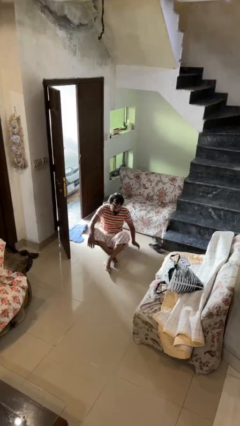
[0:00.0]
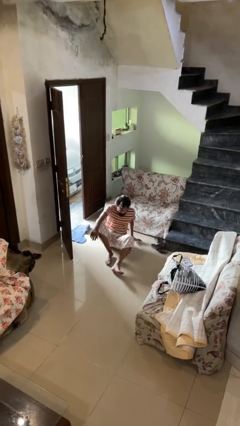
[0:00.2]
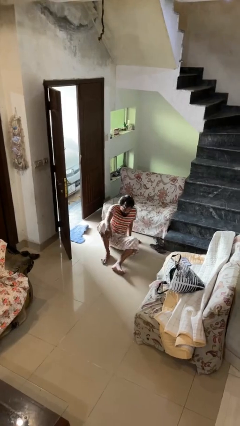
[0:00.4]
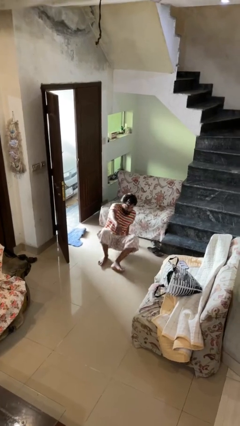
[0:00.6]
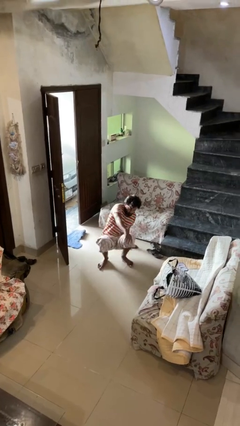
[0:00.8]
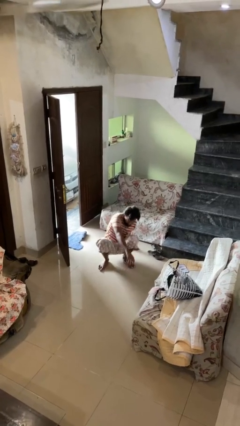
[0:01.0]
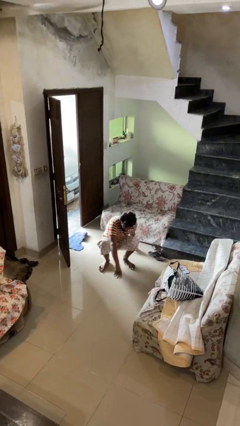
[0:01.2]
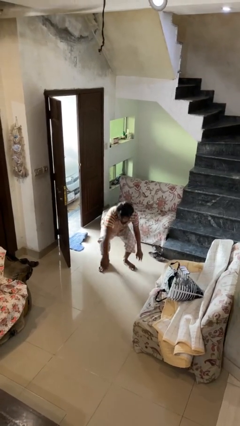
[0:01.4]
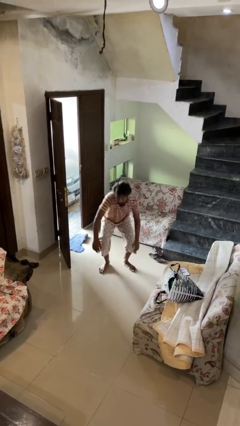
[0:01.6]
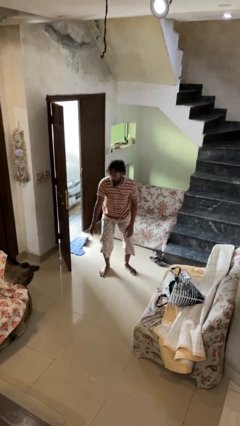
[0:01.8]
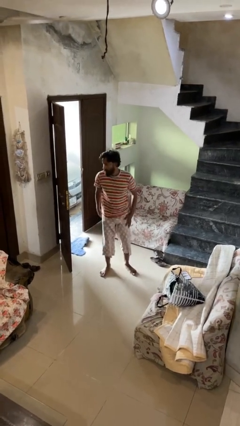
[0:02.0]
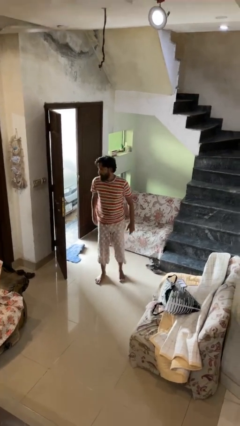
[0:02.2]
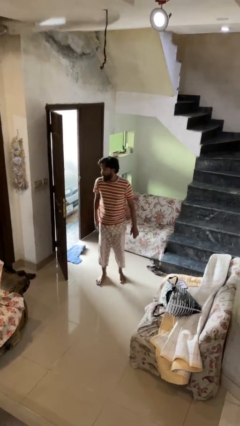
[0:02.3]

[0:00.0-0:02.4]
person stands up from floor

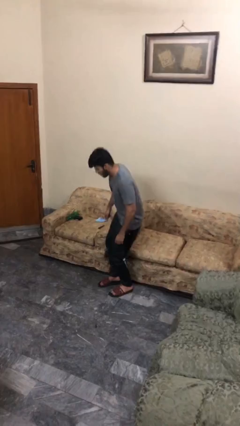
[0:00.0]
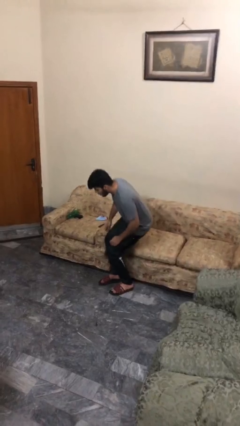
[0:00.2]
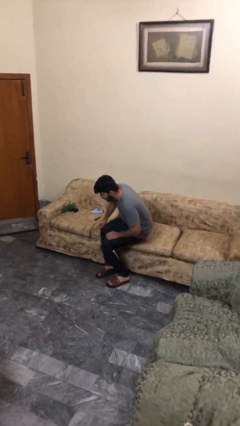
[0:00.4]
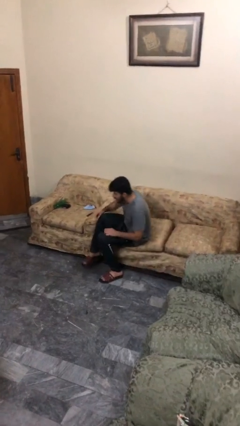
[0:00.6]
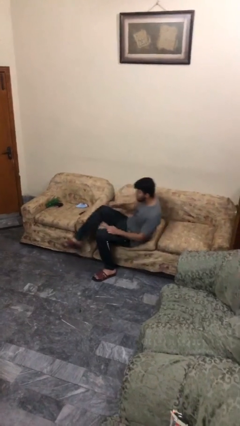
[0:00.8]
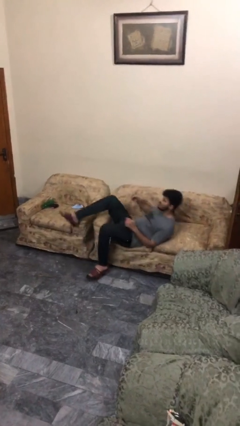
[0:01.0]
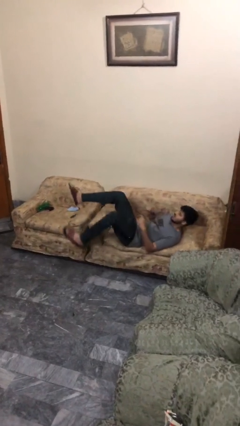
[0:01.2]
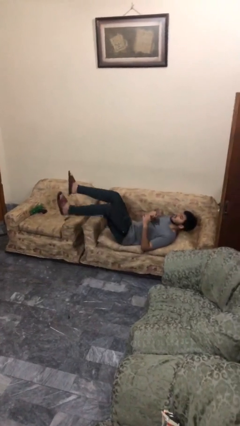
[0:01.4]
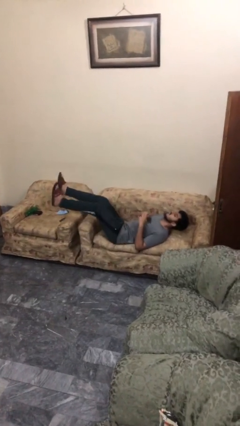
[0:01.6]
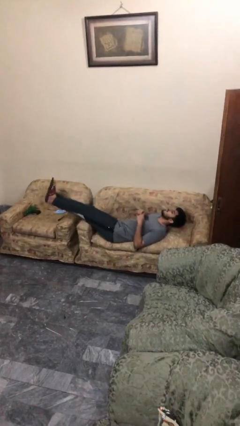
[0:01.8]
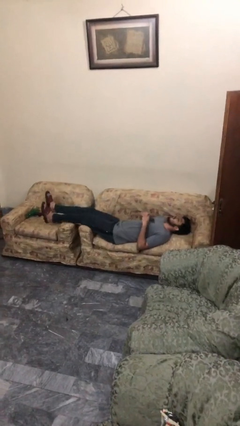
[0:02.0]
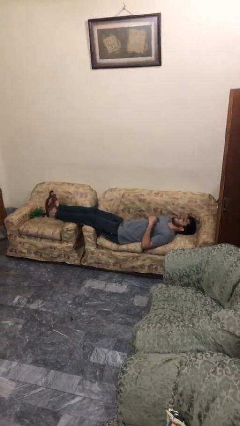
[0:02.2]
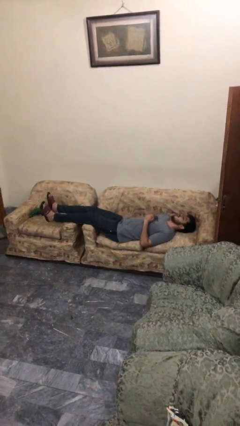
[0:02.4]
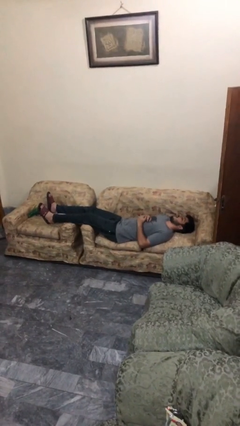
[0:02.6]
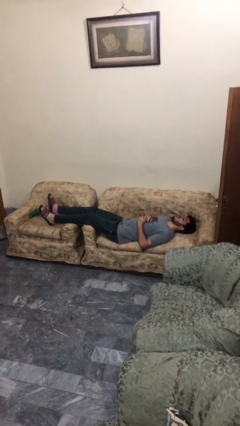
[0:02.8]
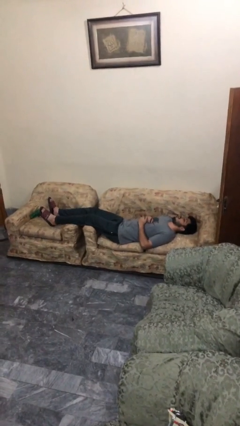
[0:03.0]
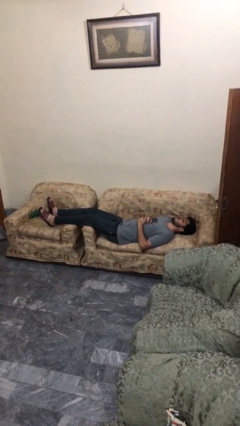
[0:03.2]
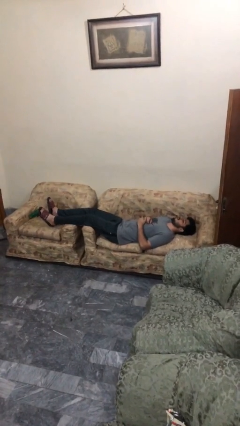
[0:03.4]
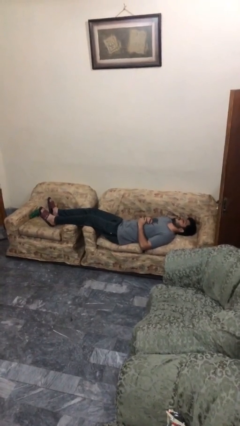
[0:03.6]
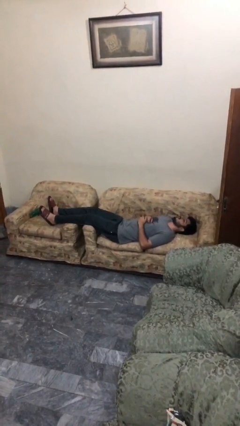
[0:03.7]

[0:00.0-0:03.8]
person lies down on couch

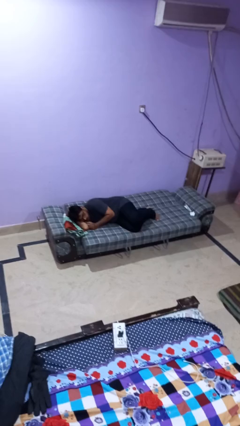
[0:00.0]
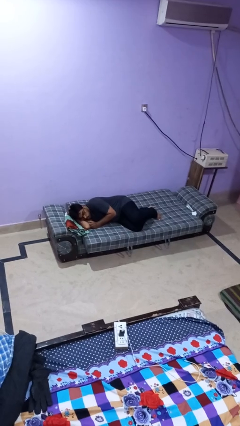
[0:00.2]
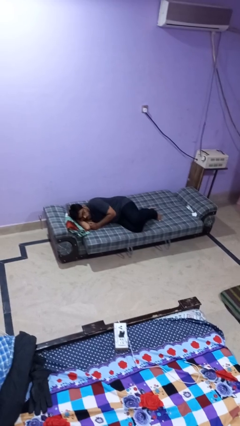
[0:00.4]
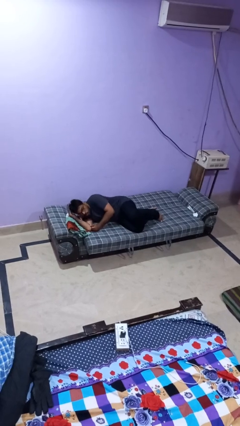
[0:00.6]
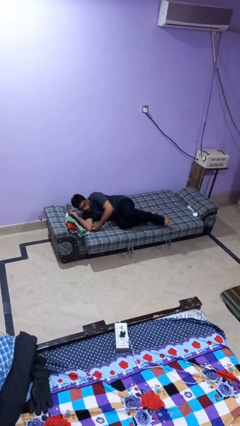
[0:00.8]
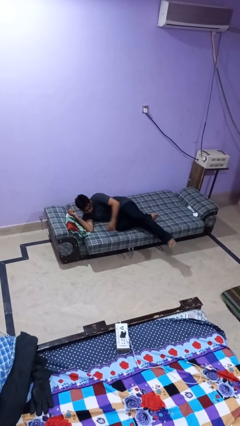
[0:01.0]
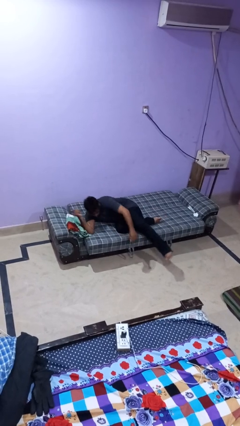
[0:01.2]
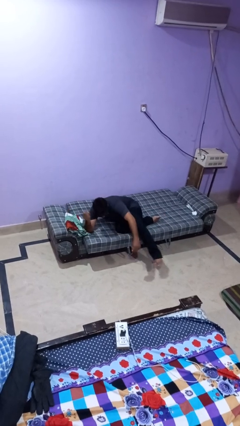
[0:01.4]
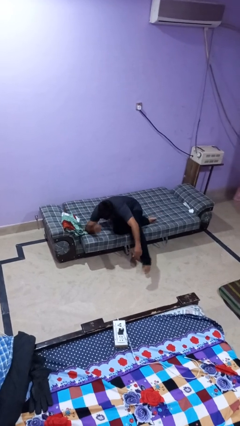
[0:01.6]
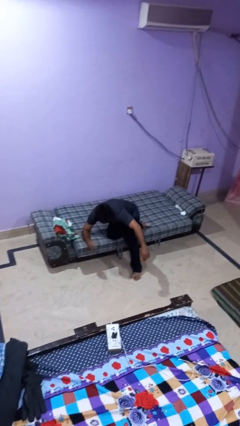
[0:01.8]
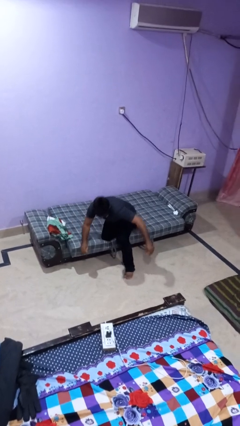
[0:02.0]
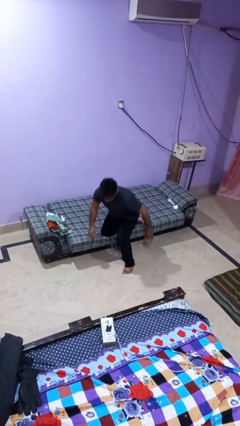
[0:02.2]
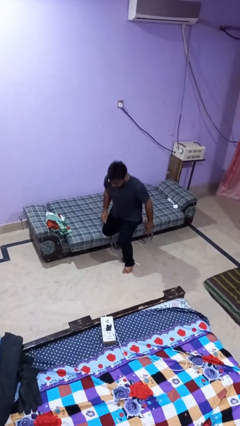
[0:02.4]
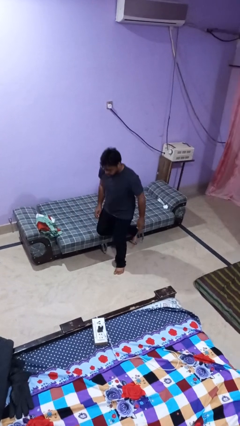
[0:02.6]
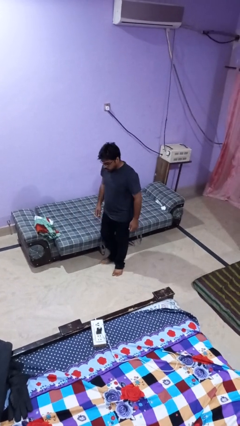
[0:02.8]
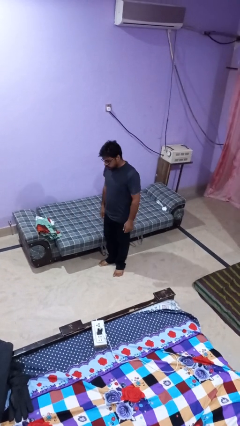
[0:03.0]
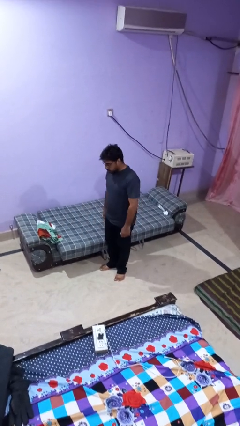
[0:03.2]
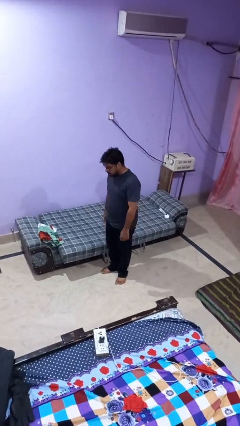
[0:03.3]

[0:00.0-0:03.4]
person stands up

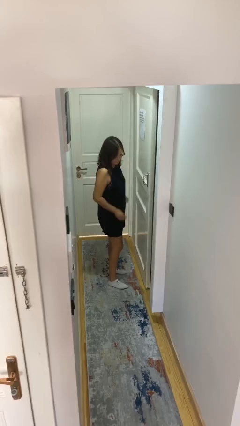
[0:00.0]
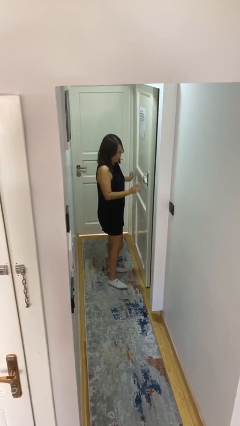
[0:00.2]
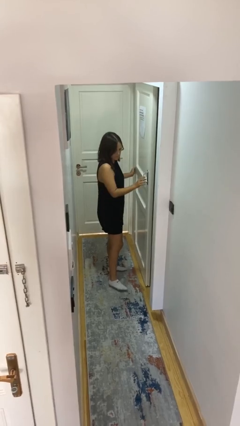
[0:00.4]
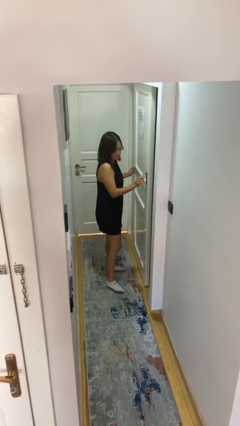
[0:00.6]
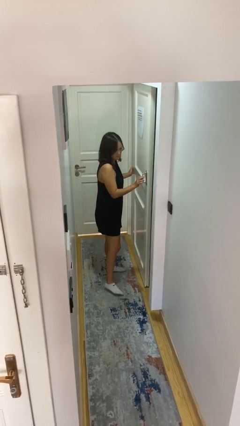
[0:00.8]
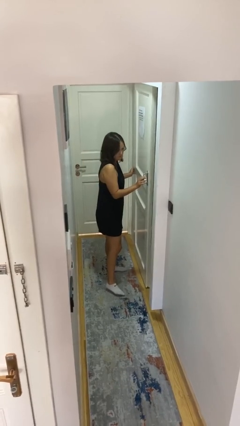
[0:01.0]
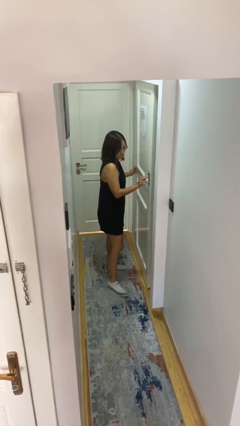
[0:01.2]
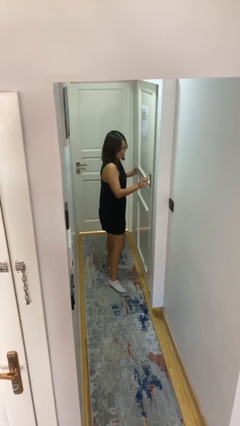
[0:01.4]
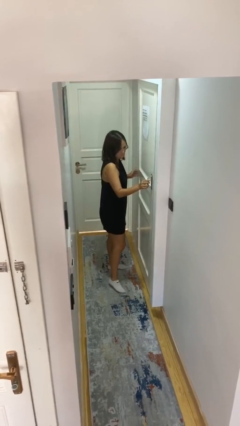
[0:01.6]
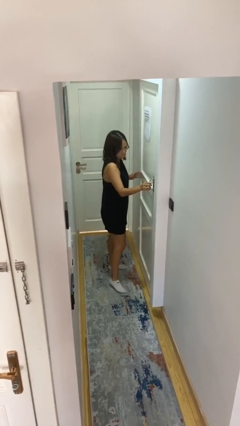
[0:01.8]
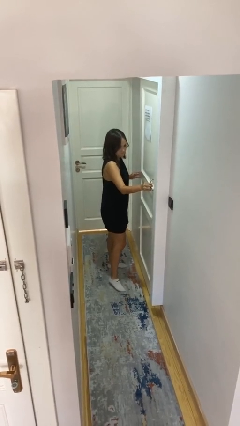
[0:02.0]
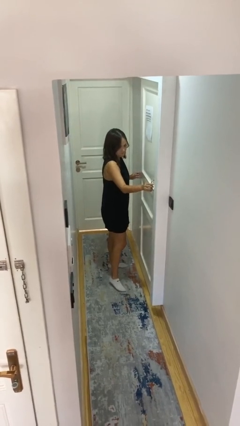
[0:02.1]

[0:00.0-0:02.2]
person closes sliding door

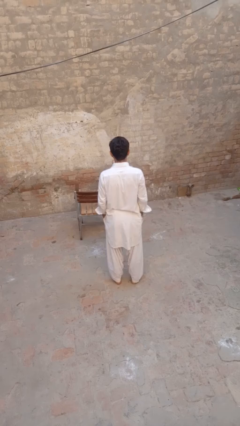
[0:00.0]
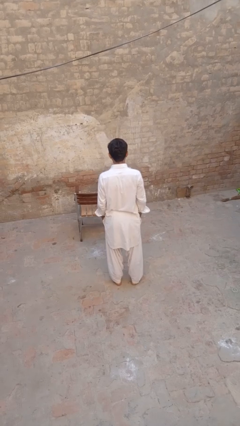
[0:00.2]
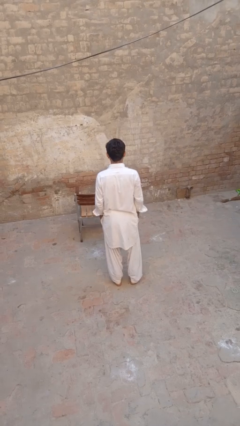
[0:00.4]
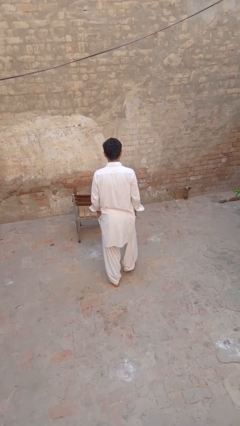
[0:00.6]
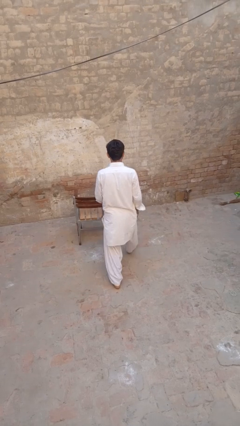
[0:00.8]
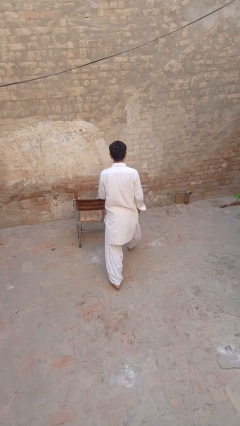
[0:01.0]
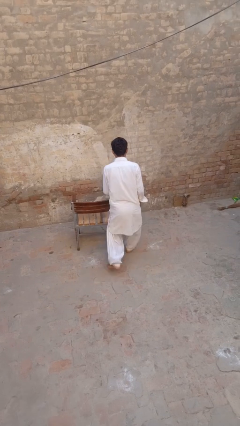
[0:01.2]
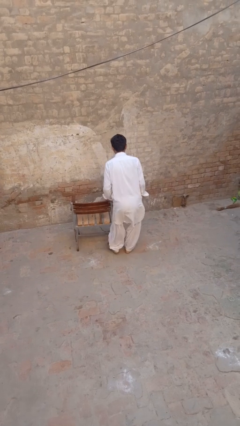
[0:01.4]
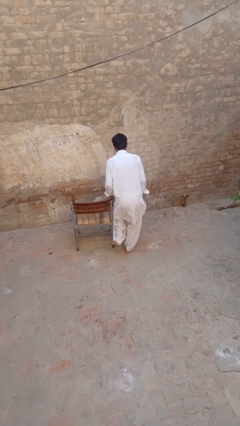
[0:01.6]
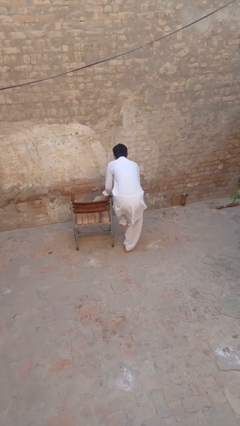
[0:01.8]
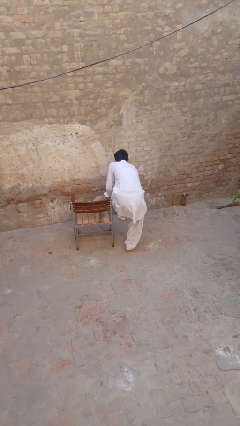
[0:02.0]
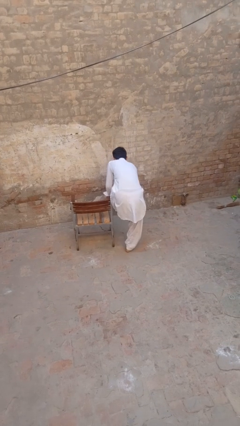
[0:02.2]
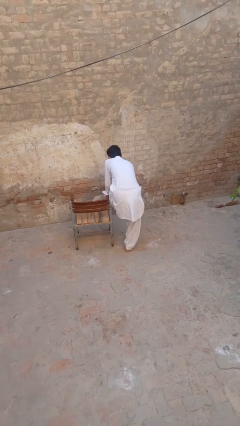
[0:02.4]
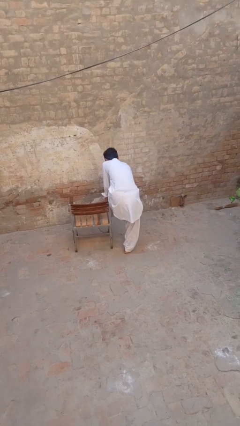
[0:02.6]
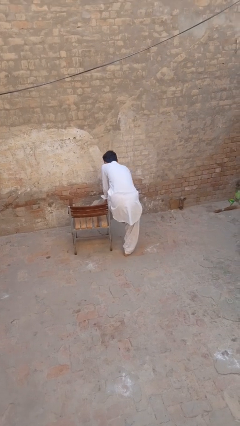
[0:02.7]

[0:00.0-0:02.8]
person stubs toe

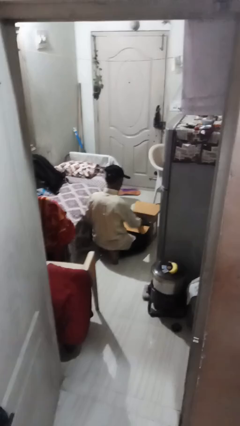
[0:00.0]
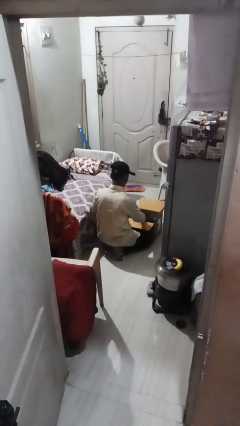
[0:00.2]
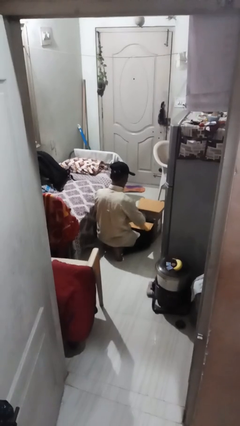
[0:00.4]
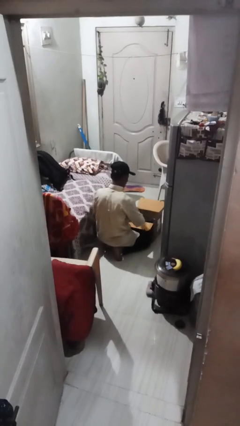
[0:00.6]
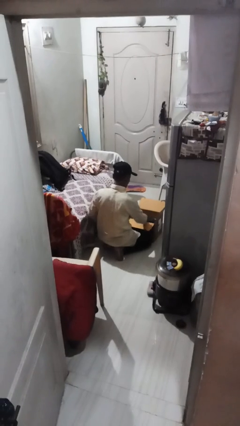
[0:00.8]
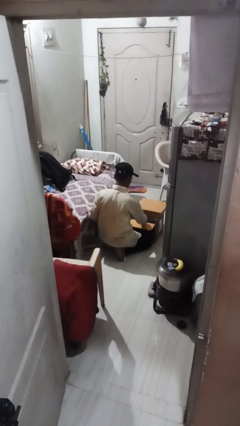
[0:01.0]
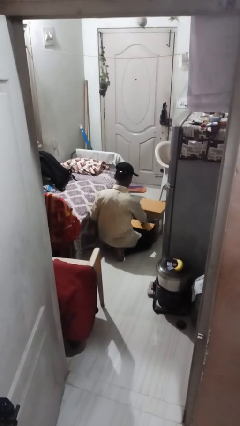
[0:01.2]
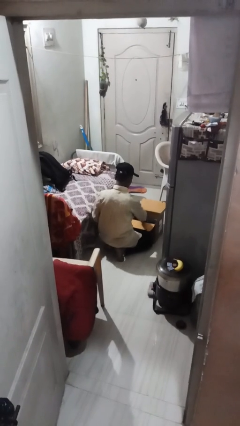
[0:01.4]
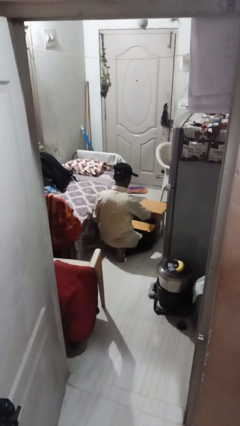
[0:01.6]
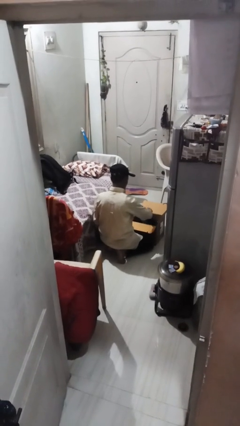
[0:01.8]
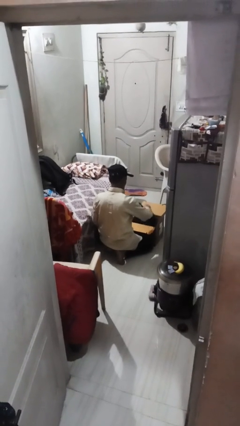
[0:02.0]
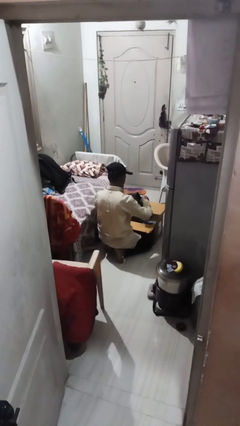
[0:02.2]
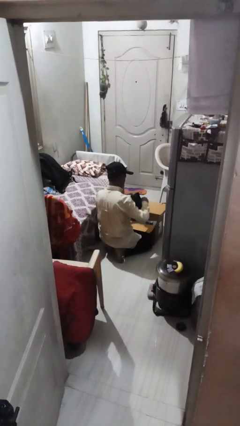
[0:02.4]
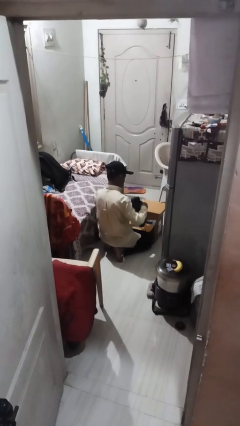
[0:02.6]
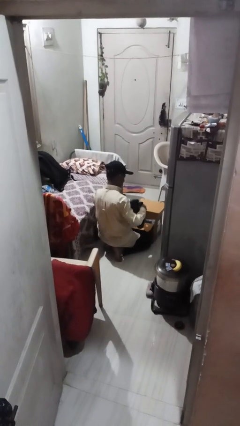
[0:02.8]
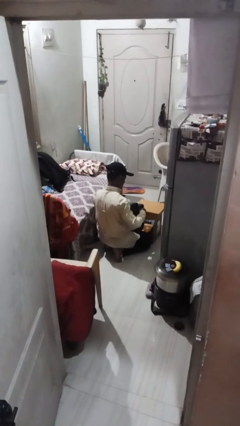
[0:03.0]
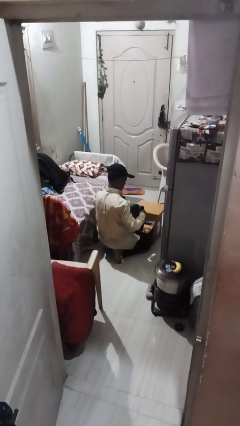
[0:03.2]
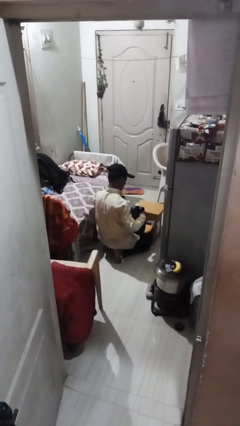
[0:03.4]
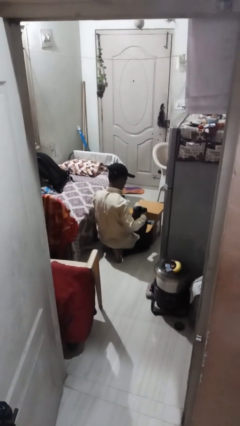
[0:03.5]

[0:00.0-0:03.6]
person takes object from box
